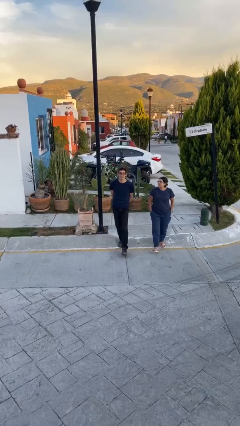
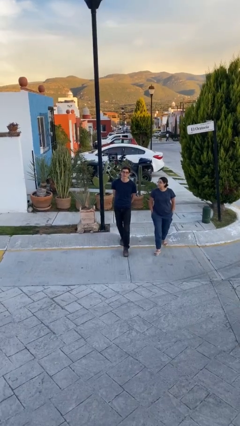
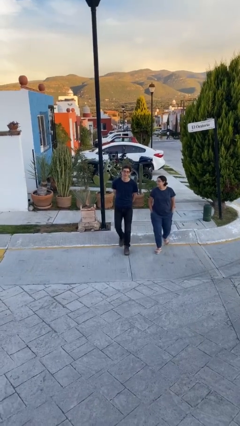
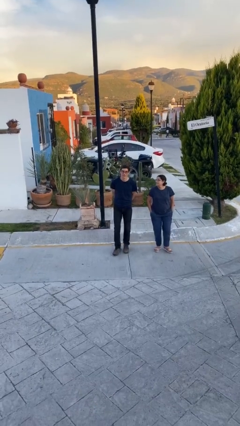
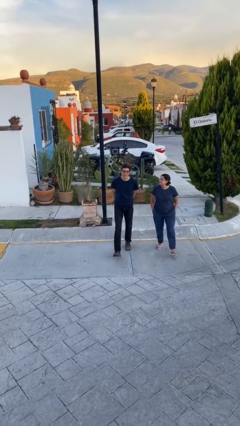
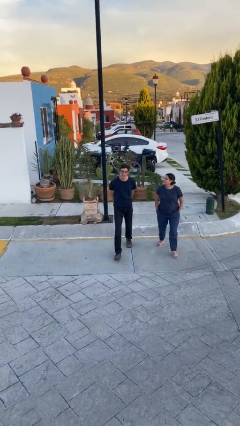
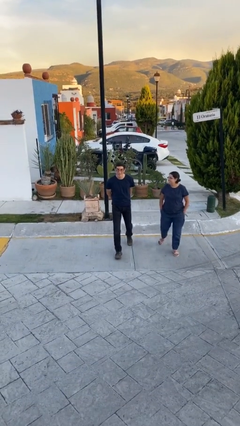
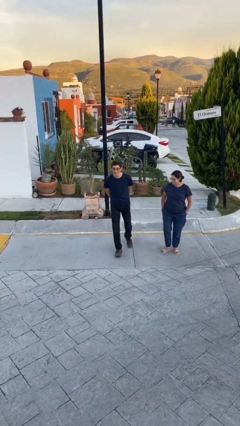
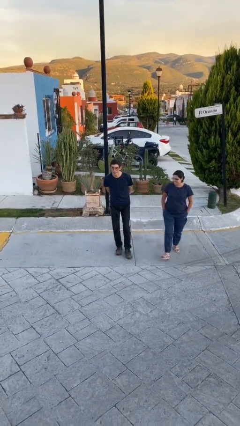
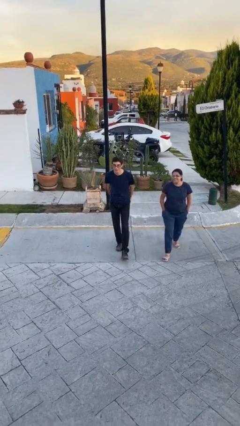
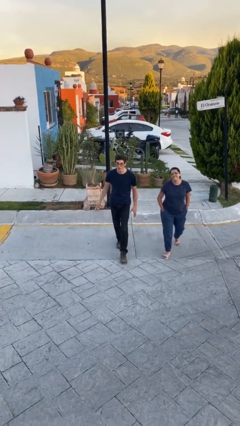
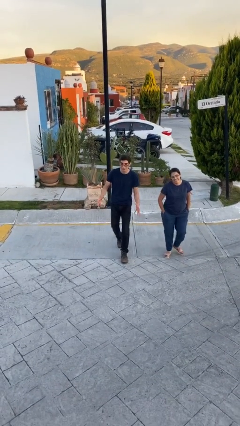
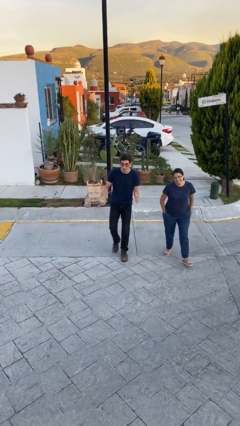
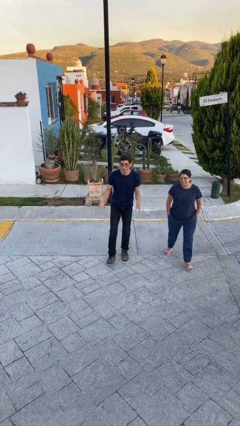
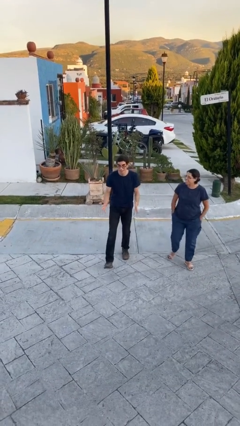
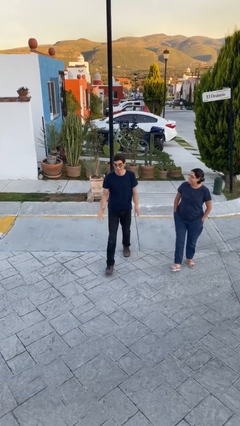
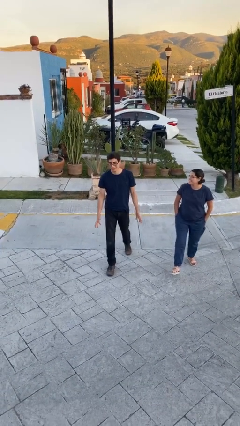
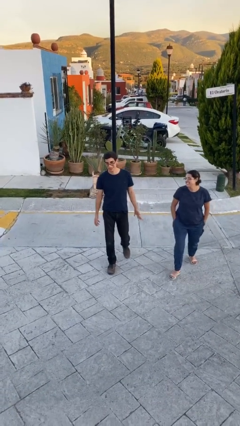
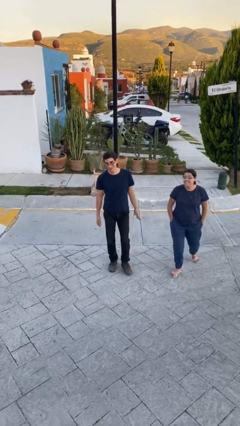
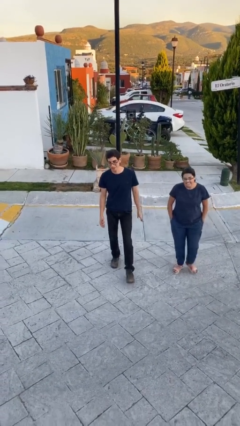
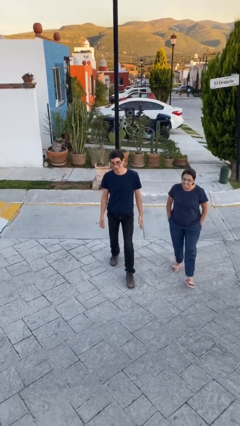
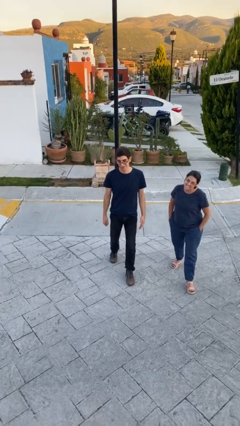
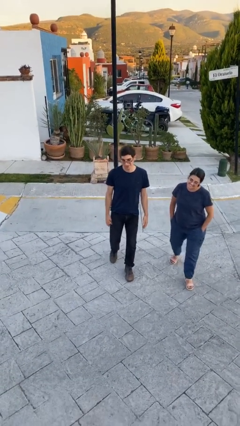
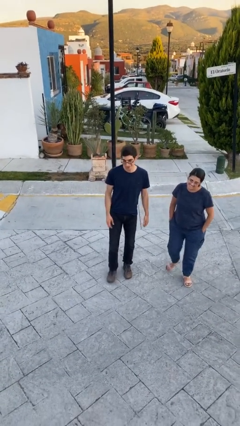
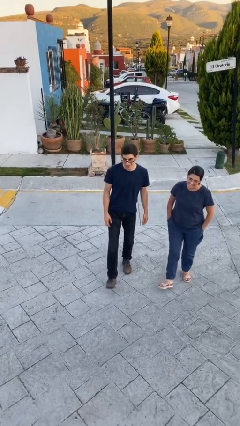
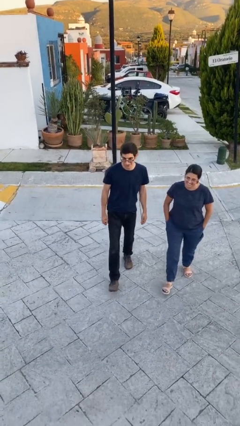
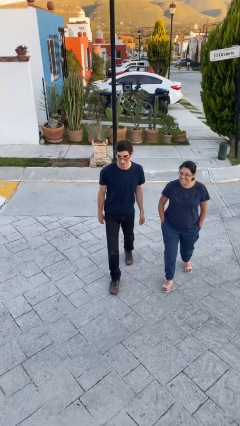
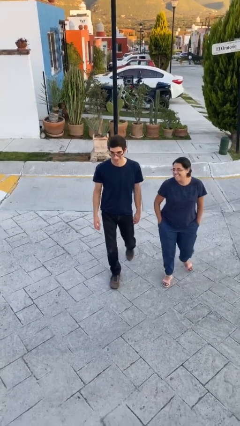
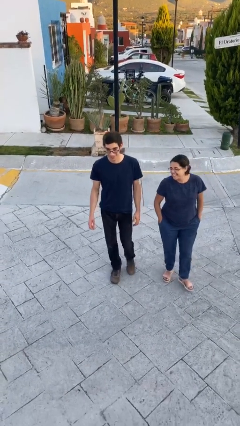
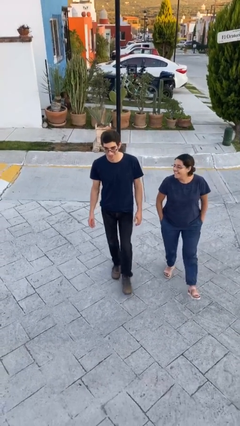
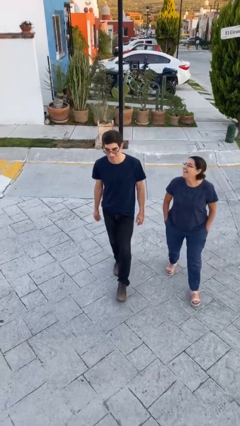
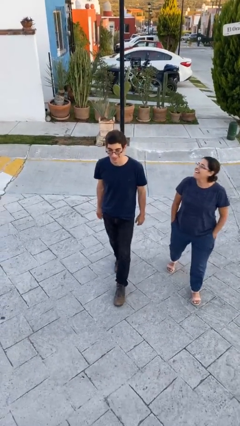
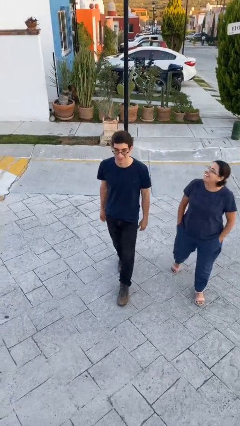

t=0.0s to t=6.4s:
person talks to person

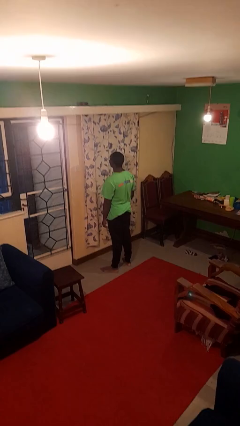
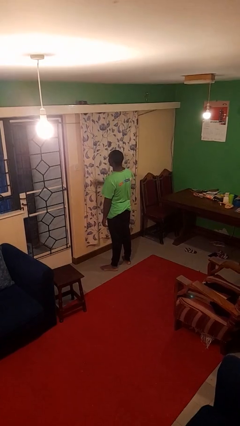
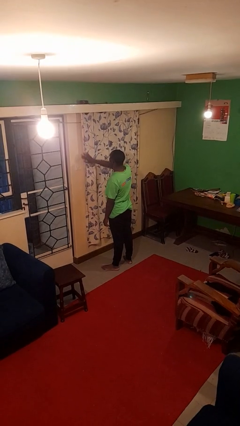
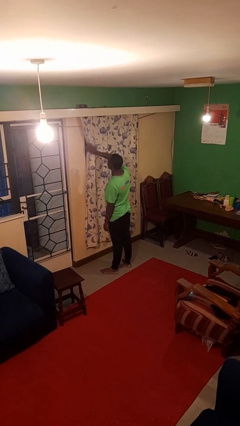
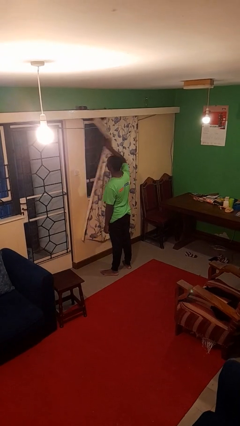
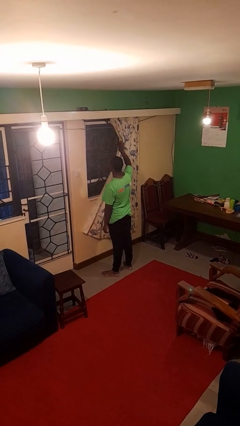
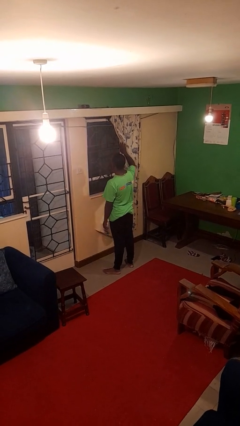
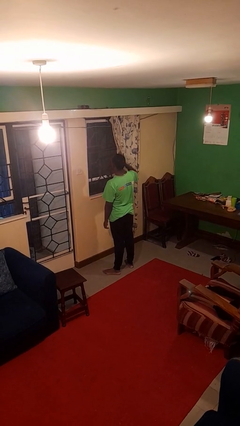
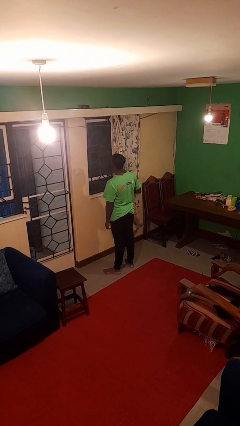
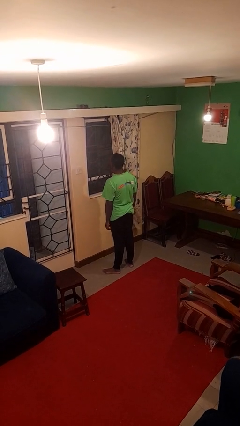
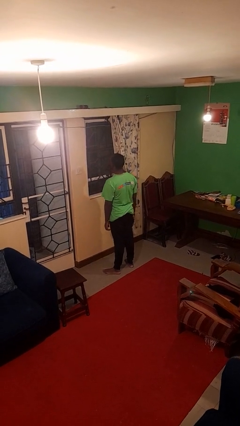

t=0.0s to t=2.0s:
person opens curtains

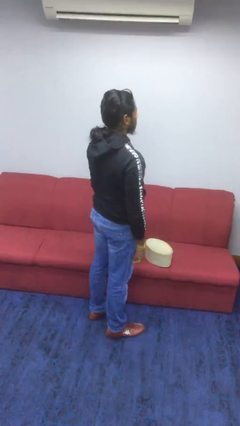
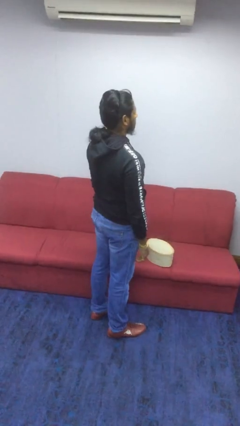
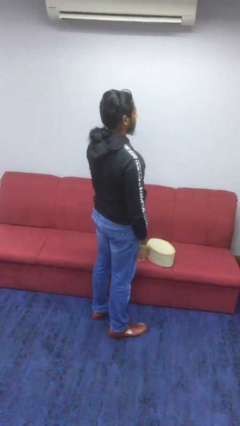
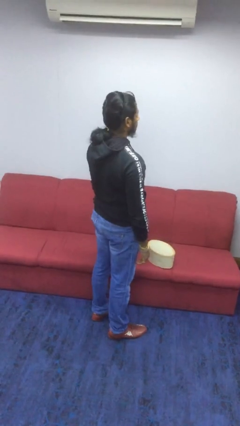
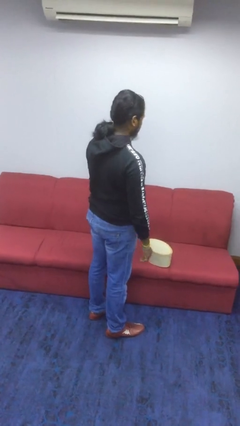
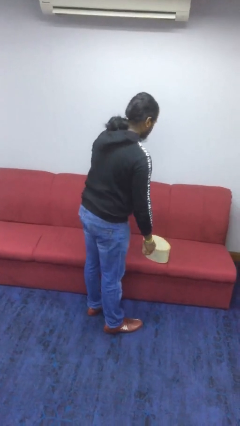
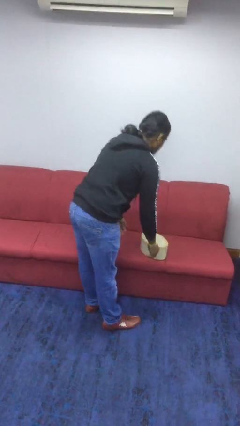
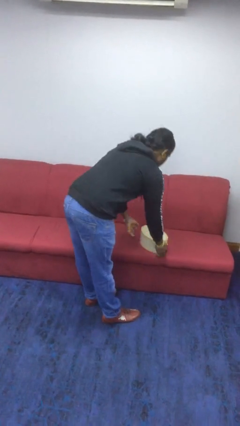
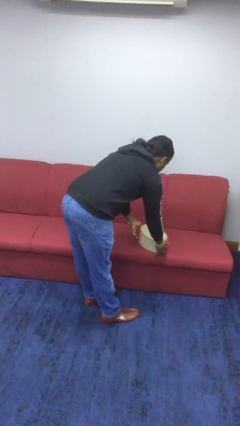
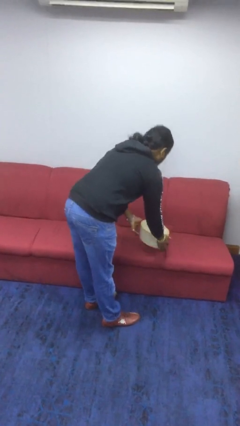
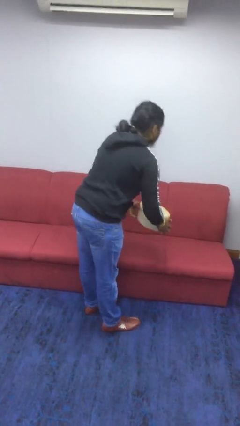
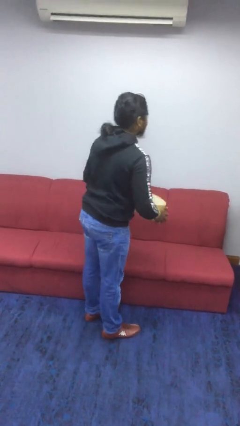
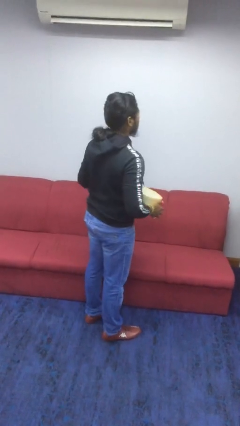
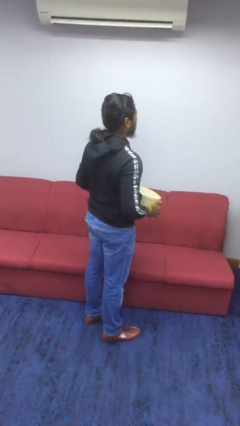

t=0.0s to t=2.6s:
person picks up object from couch

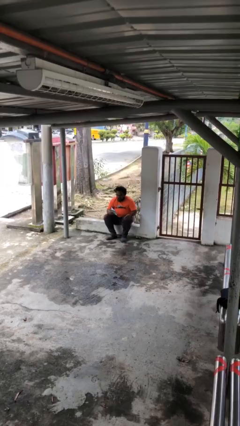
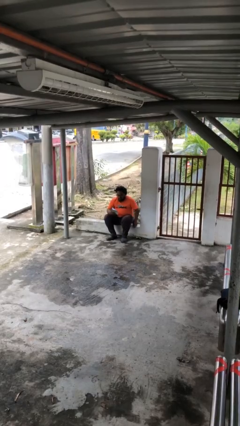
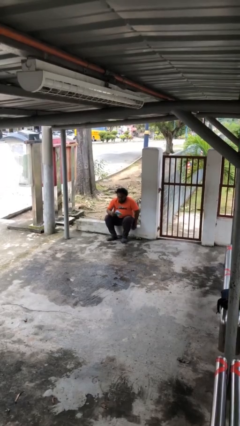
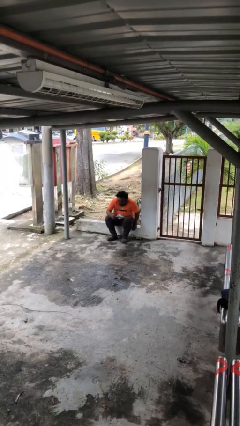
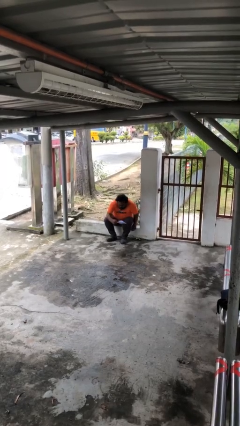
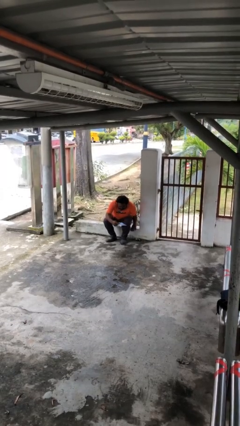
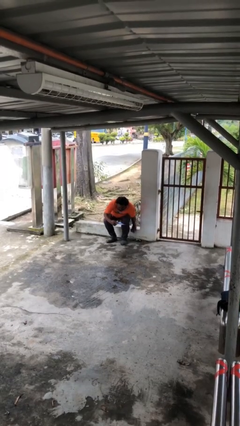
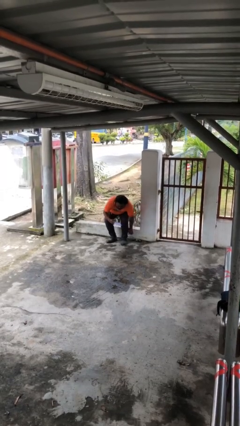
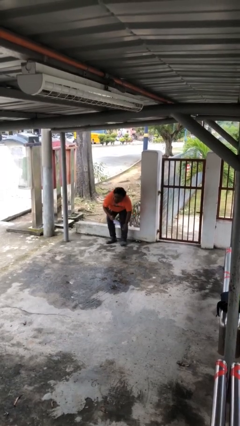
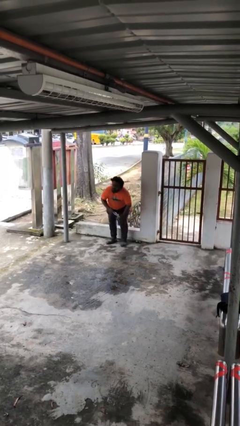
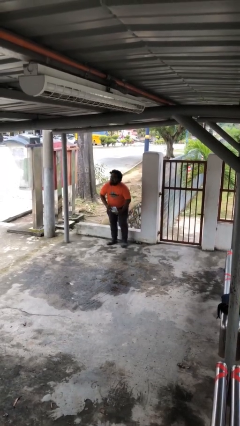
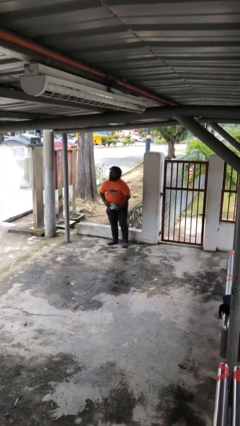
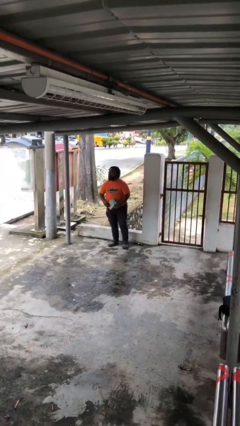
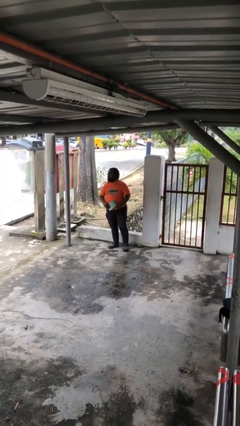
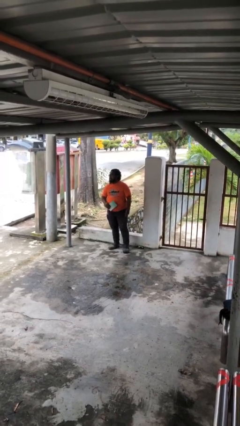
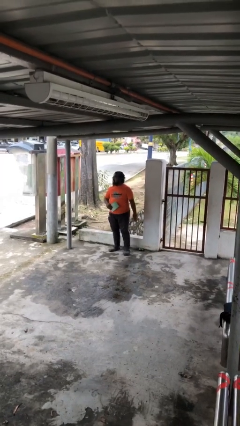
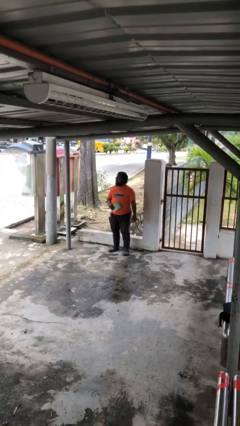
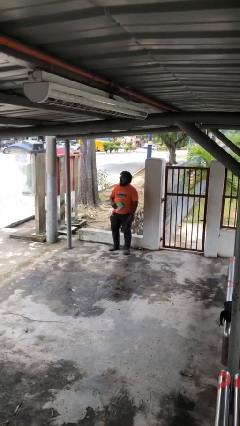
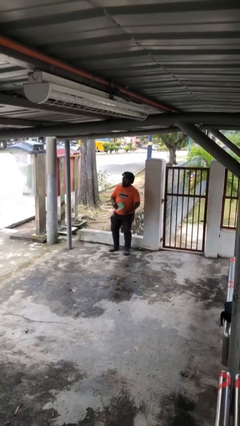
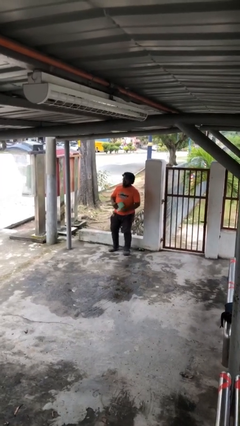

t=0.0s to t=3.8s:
person stands up

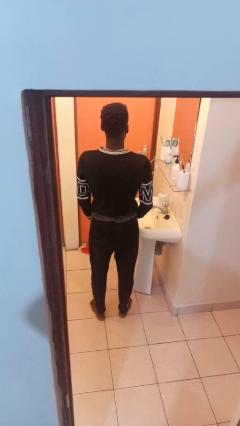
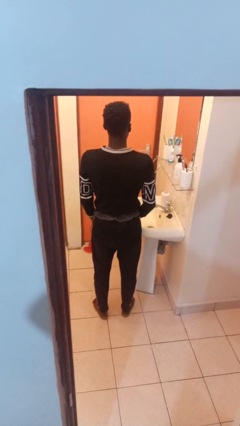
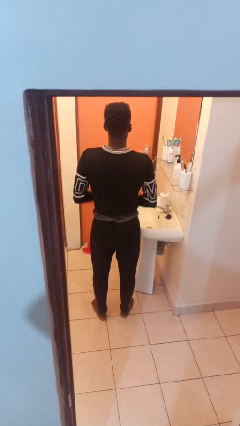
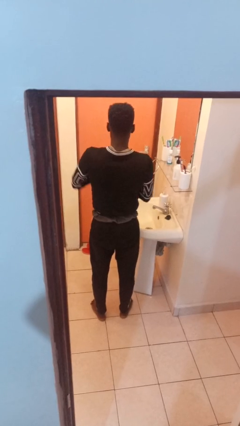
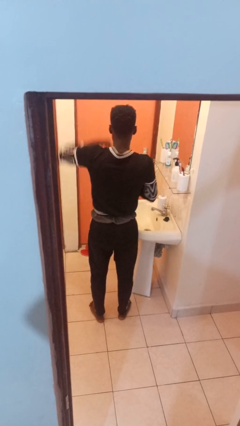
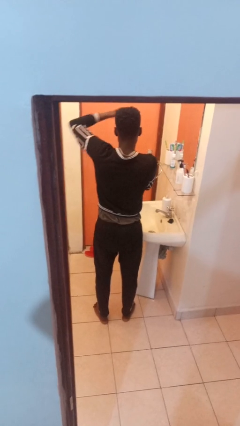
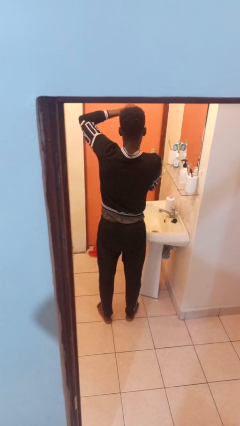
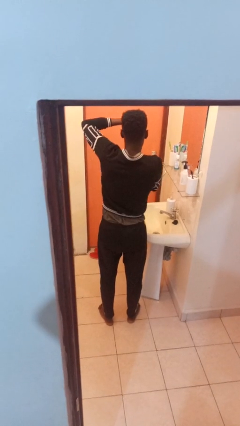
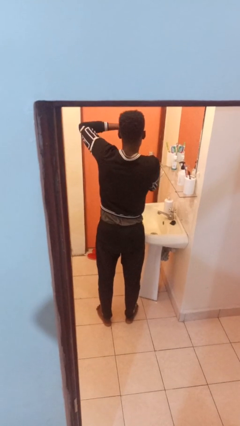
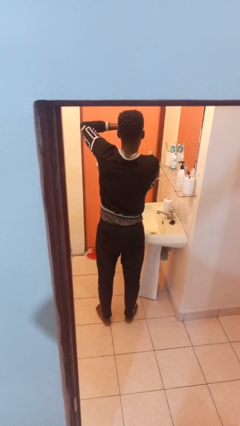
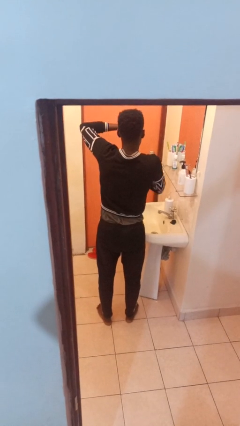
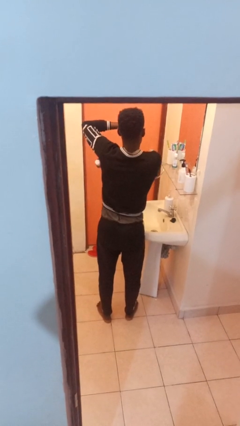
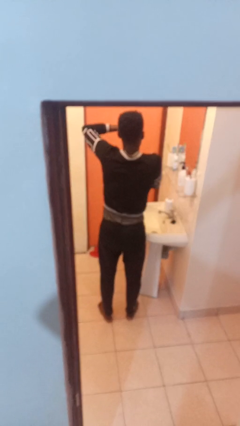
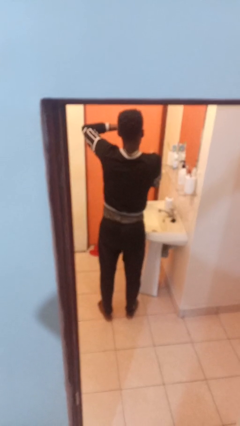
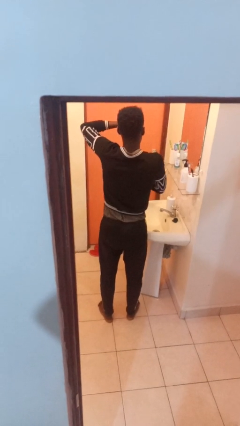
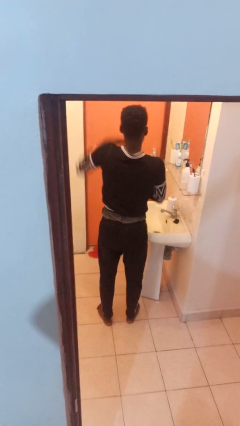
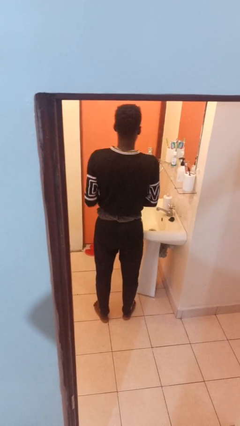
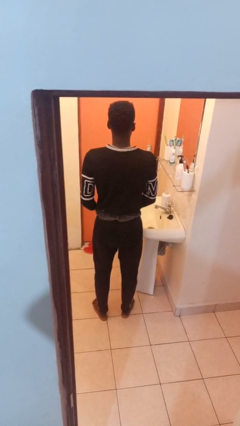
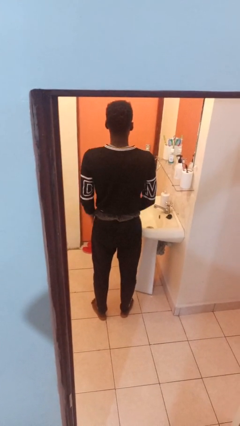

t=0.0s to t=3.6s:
person applies deodorant
